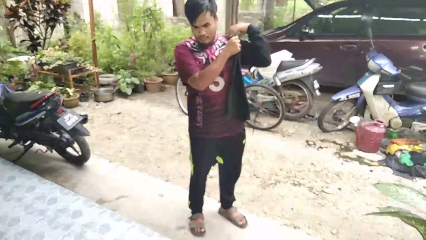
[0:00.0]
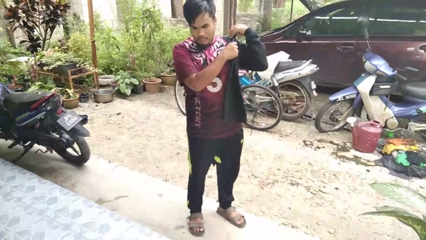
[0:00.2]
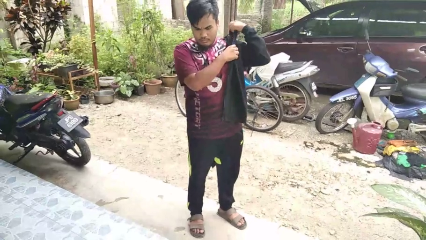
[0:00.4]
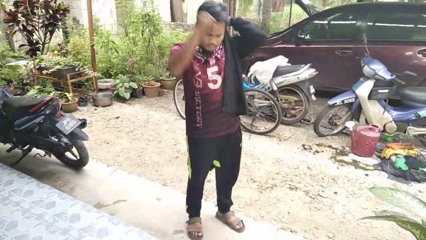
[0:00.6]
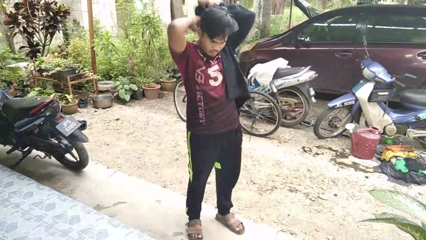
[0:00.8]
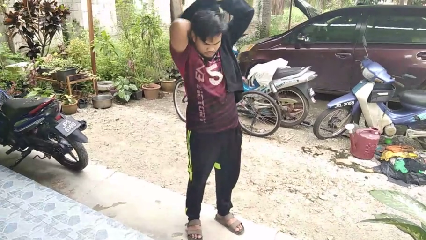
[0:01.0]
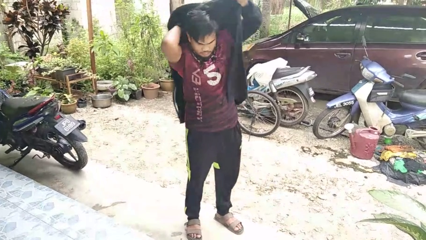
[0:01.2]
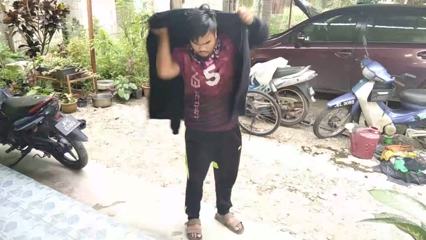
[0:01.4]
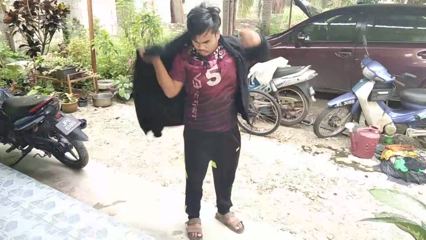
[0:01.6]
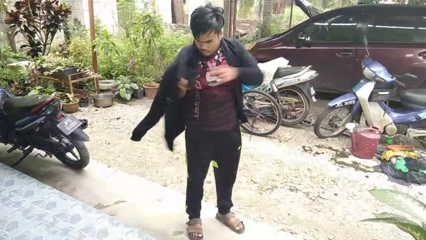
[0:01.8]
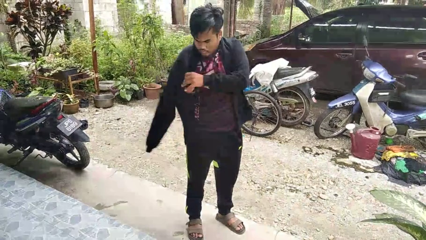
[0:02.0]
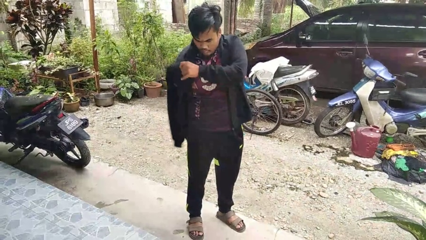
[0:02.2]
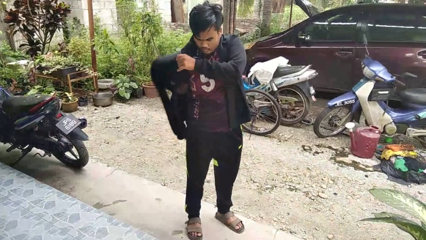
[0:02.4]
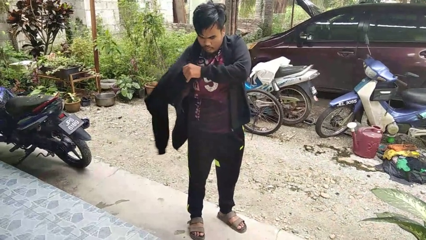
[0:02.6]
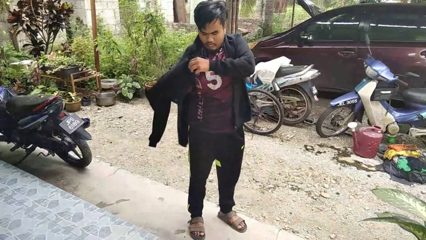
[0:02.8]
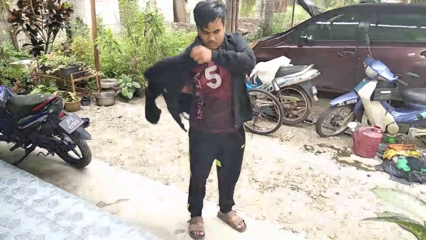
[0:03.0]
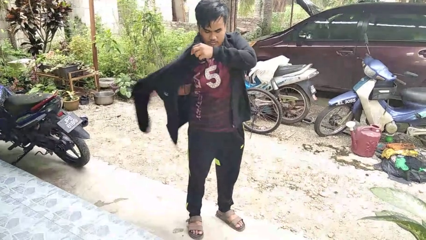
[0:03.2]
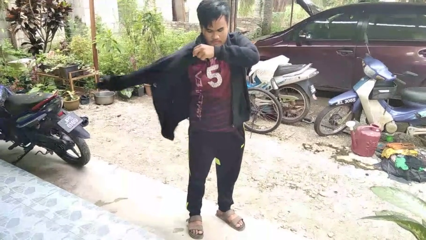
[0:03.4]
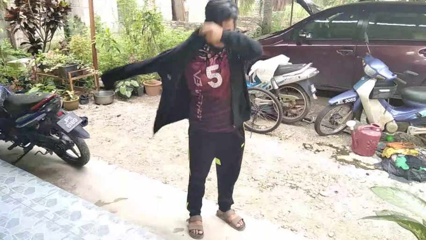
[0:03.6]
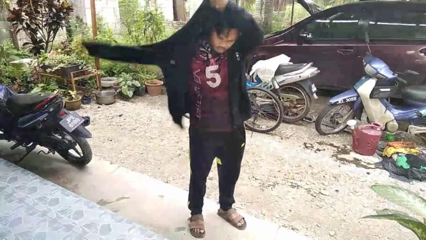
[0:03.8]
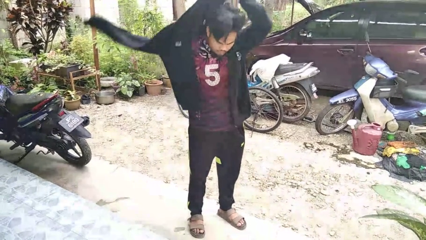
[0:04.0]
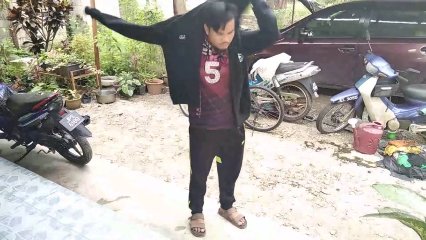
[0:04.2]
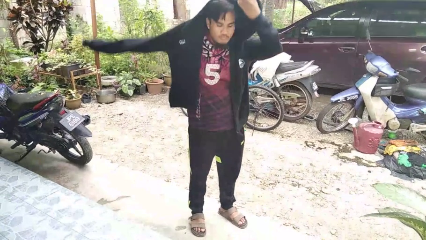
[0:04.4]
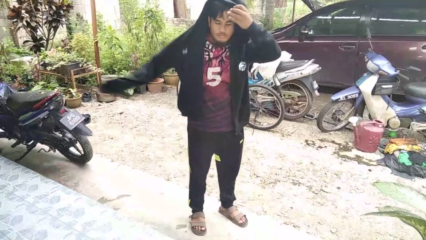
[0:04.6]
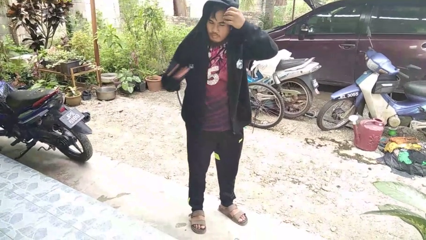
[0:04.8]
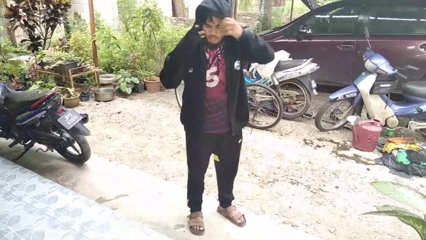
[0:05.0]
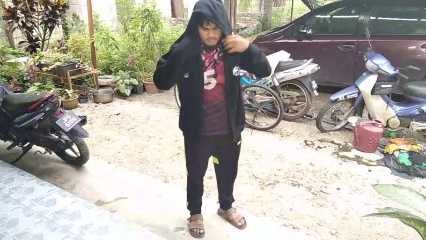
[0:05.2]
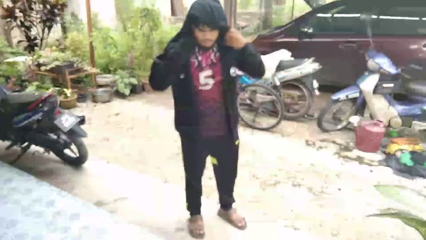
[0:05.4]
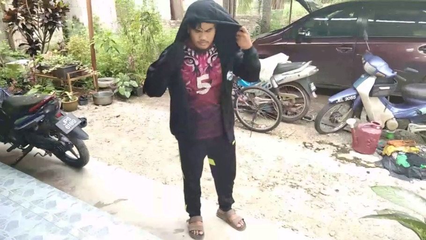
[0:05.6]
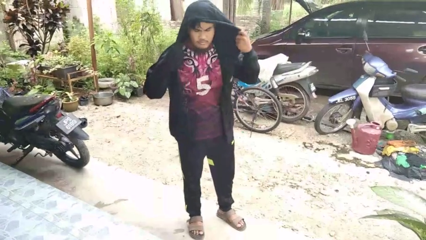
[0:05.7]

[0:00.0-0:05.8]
person puts on hoodie

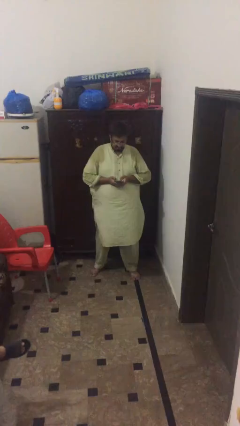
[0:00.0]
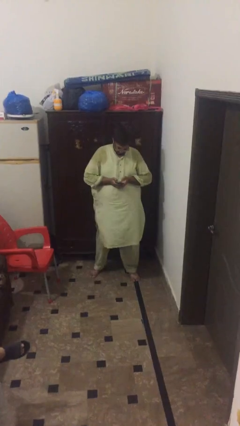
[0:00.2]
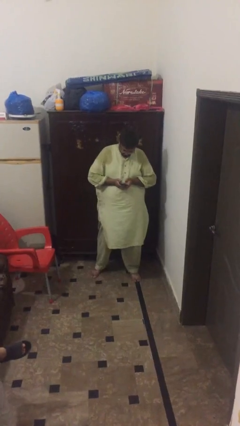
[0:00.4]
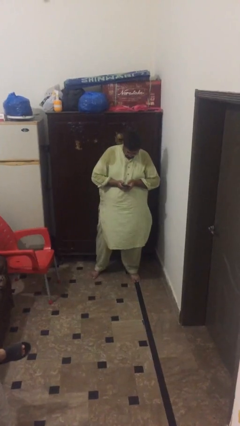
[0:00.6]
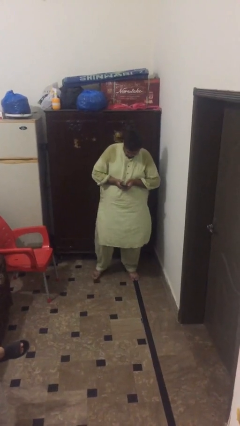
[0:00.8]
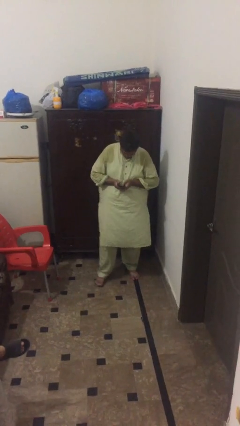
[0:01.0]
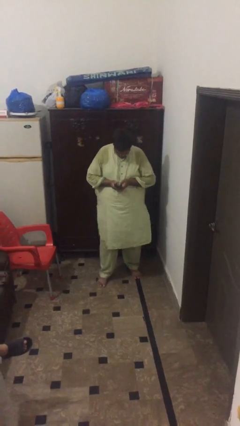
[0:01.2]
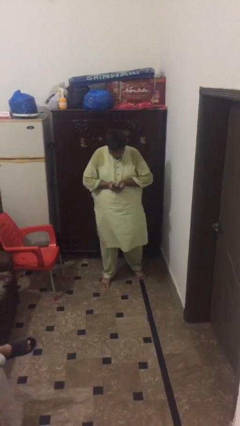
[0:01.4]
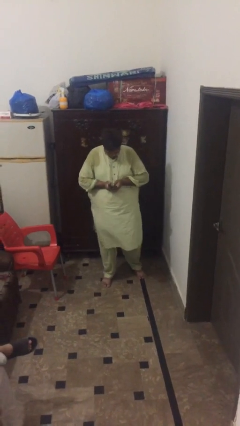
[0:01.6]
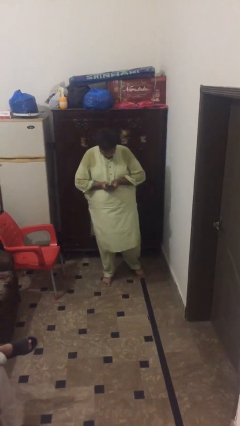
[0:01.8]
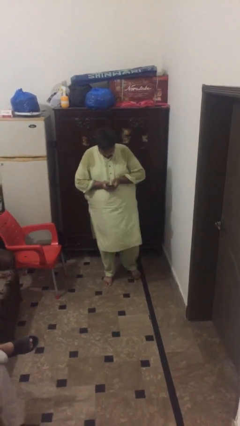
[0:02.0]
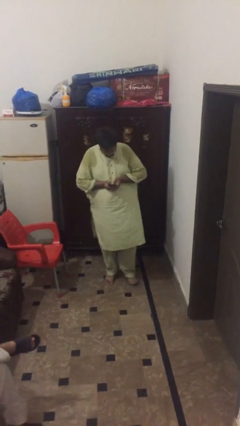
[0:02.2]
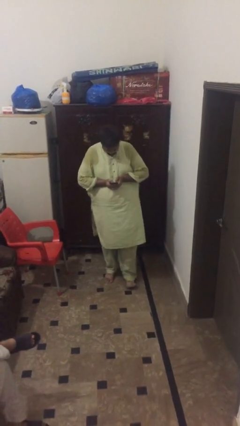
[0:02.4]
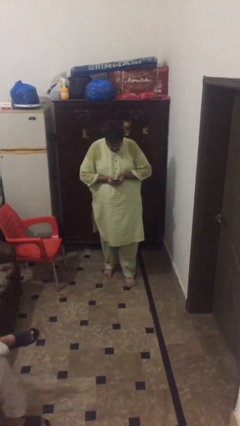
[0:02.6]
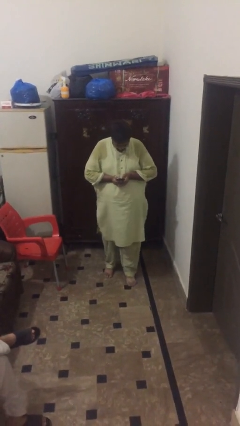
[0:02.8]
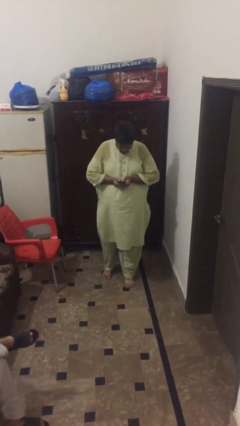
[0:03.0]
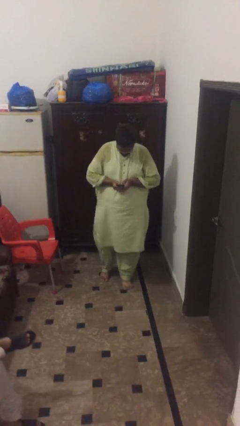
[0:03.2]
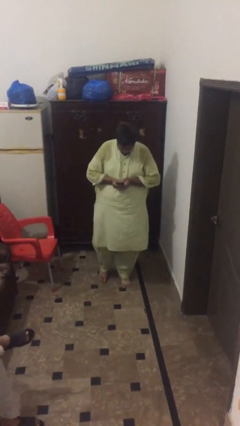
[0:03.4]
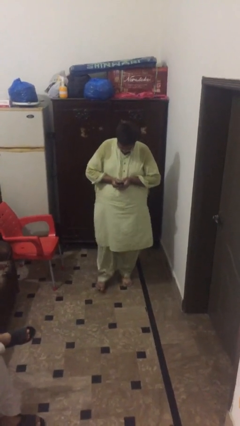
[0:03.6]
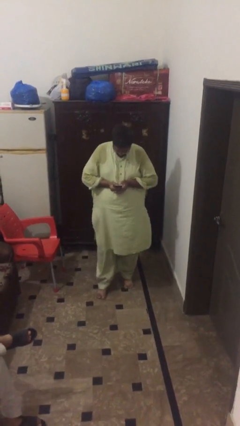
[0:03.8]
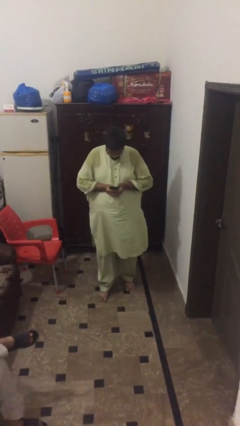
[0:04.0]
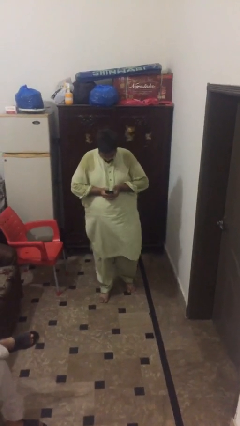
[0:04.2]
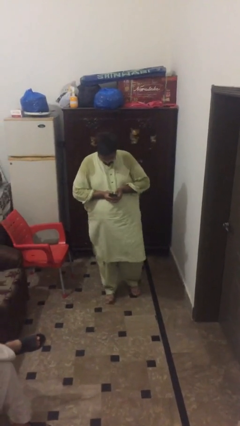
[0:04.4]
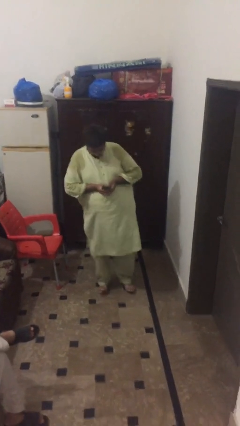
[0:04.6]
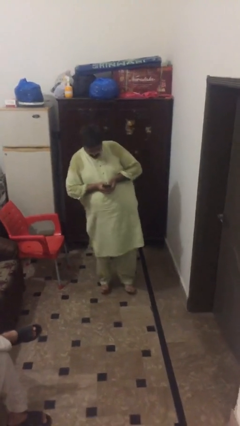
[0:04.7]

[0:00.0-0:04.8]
person texts on phone

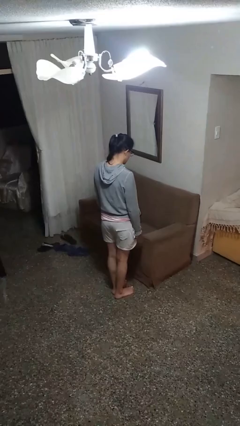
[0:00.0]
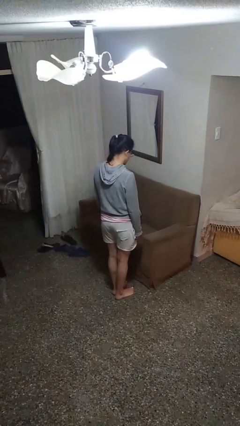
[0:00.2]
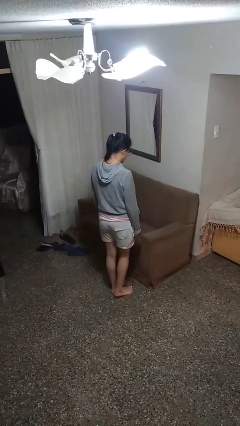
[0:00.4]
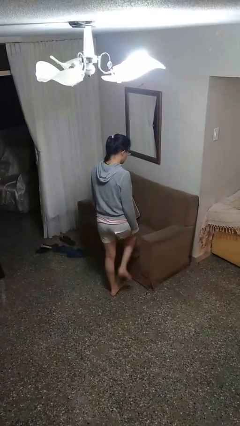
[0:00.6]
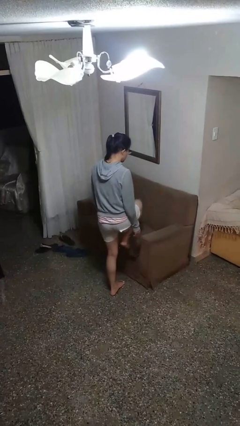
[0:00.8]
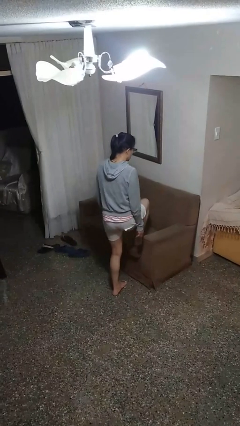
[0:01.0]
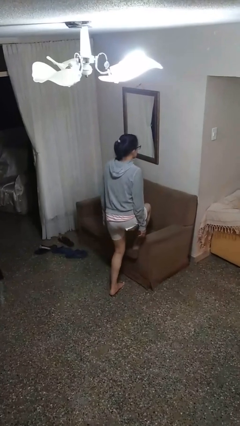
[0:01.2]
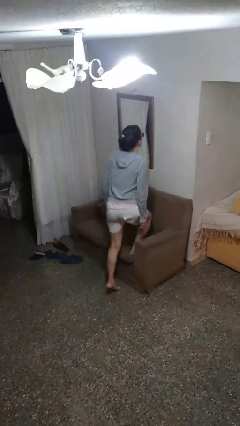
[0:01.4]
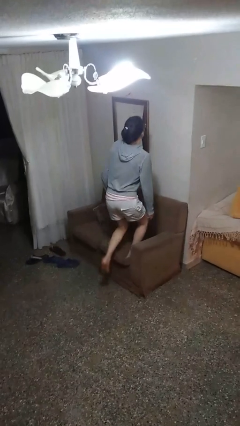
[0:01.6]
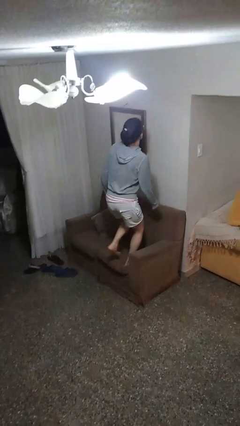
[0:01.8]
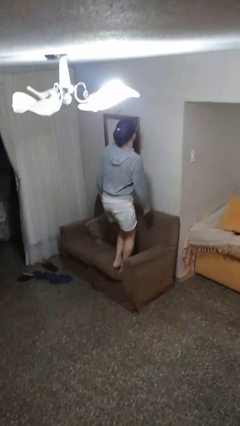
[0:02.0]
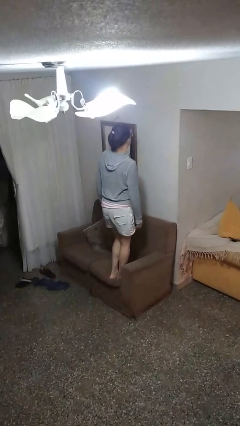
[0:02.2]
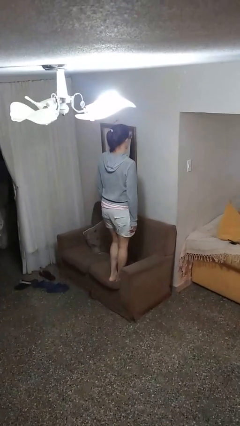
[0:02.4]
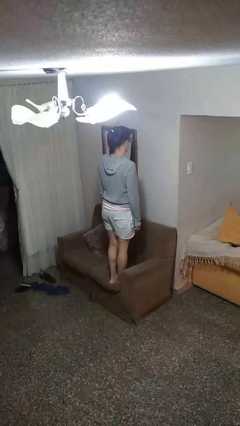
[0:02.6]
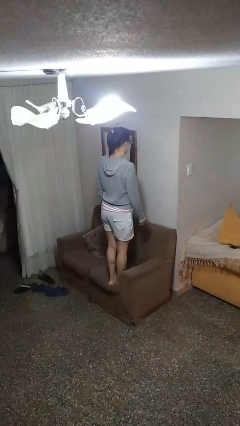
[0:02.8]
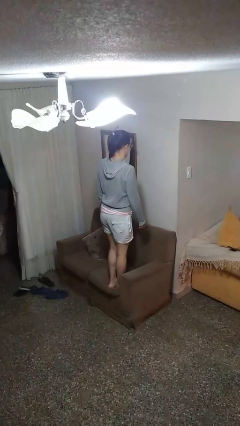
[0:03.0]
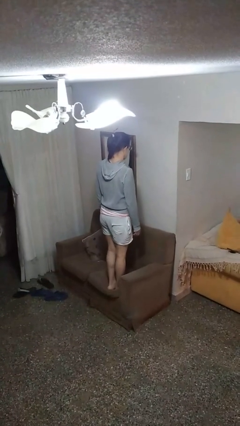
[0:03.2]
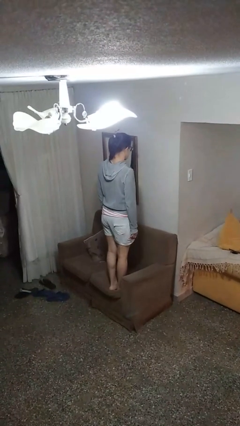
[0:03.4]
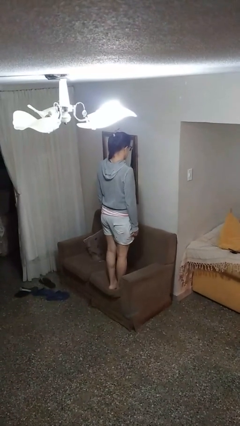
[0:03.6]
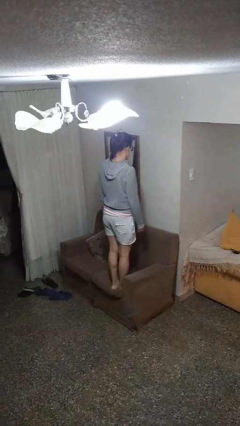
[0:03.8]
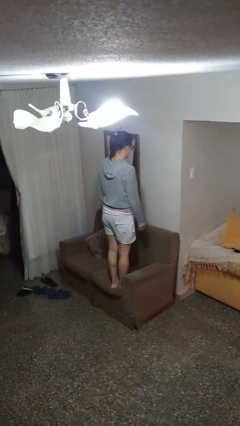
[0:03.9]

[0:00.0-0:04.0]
person climbs on couch

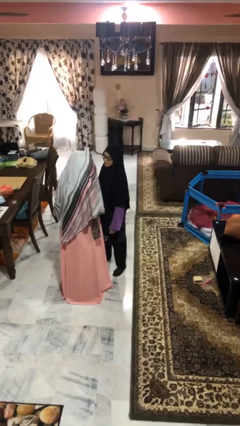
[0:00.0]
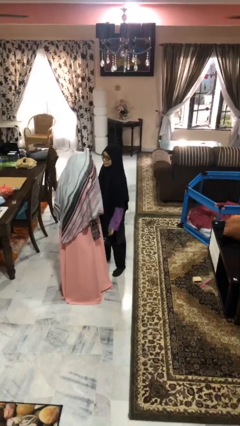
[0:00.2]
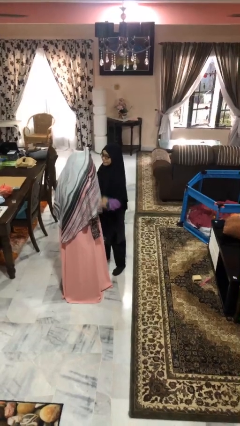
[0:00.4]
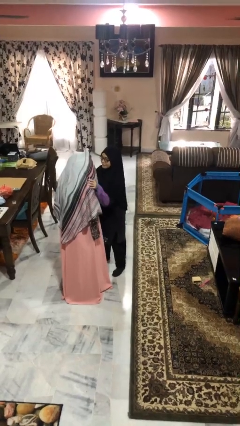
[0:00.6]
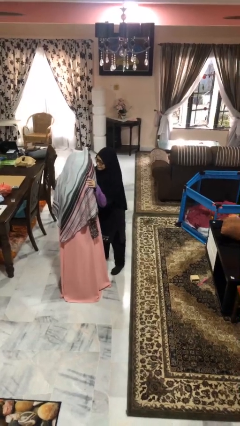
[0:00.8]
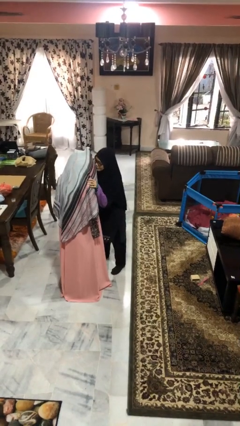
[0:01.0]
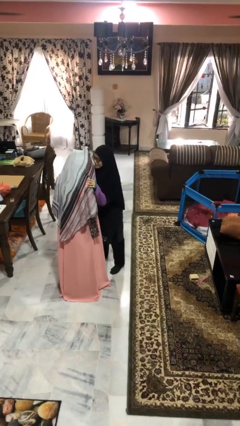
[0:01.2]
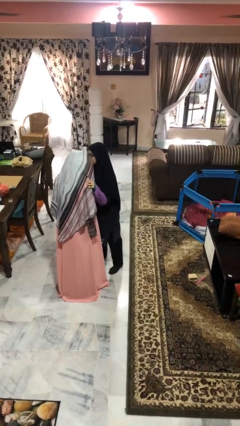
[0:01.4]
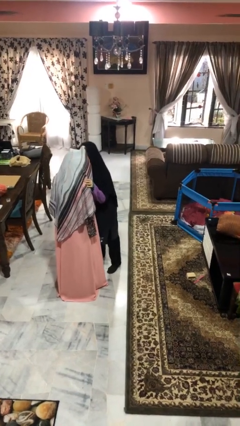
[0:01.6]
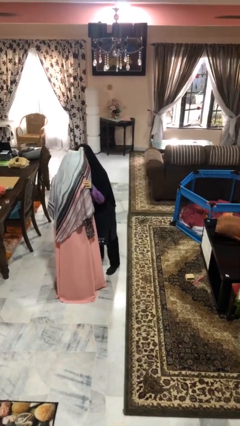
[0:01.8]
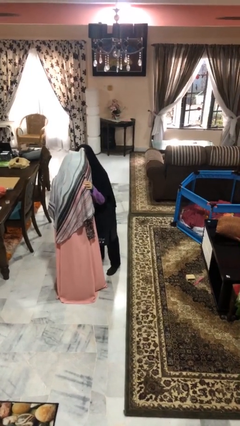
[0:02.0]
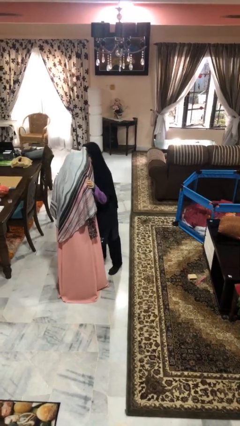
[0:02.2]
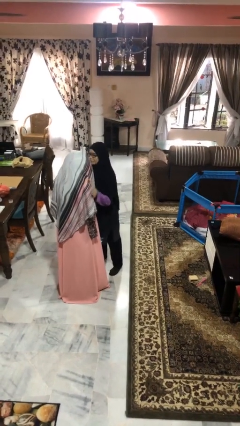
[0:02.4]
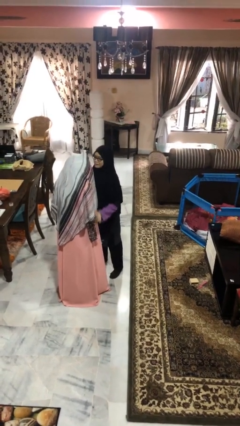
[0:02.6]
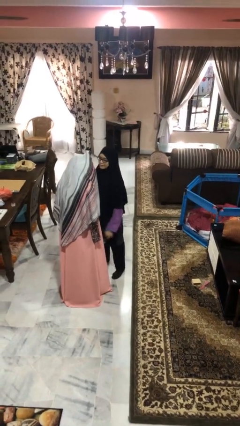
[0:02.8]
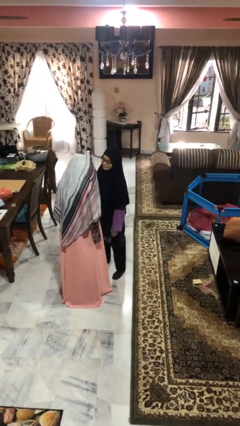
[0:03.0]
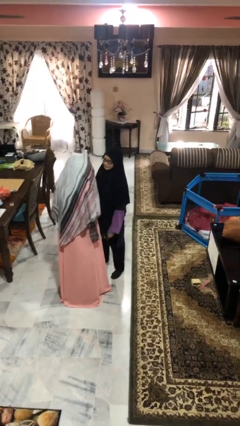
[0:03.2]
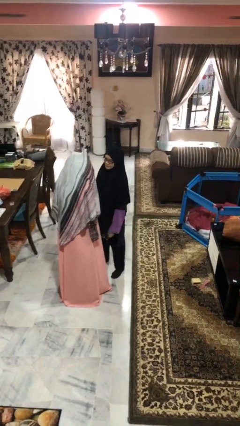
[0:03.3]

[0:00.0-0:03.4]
person kisses cheek of person
